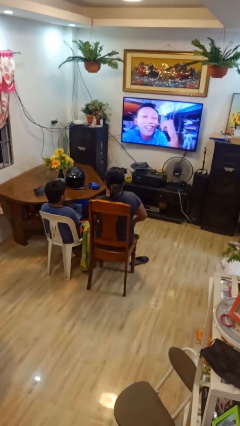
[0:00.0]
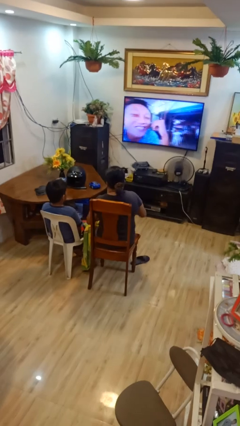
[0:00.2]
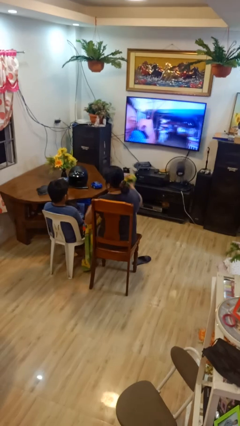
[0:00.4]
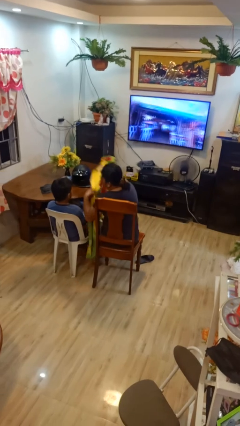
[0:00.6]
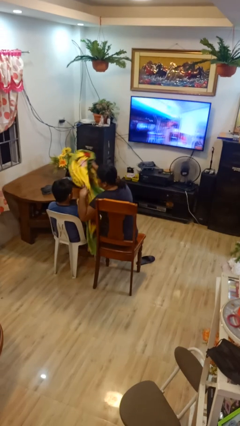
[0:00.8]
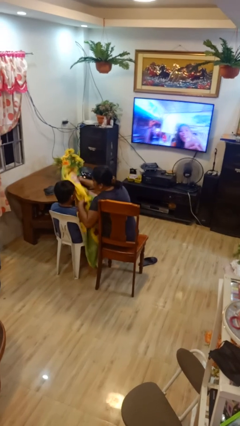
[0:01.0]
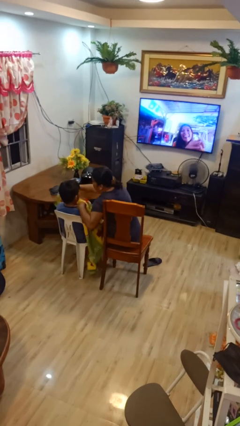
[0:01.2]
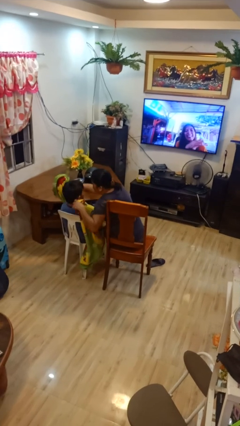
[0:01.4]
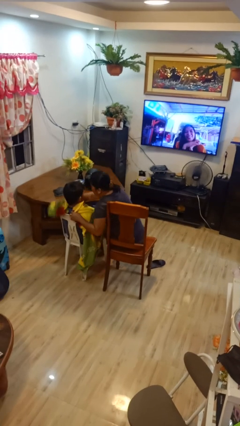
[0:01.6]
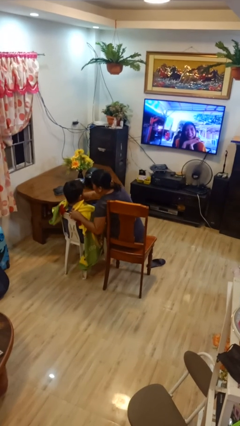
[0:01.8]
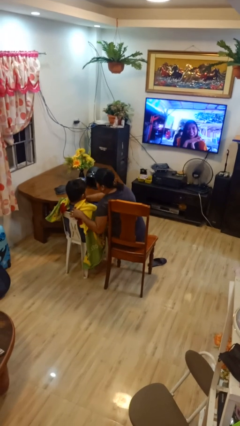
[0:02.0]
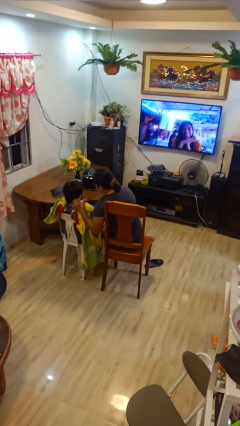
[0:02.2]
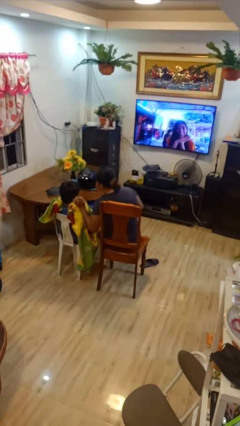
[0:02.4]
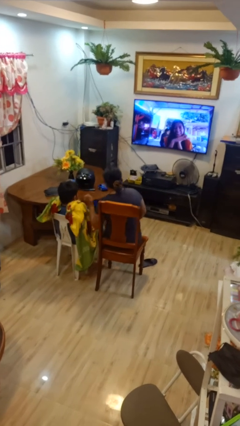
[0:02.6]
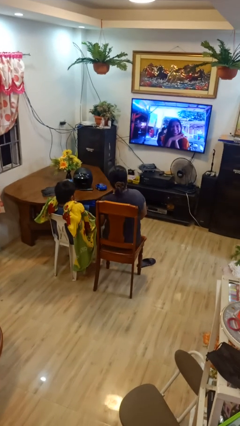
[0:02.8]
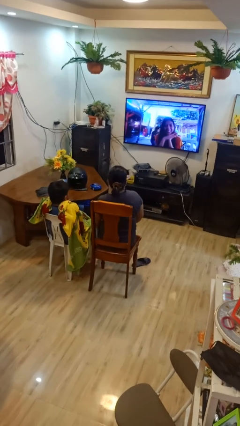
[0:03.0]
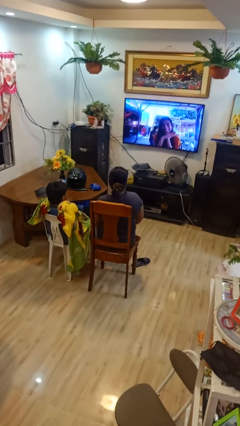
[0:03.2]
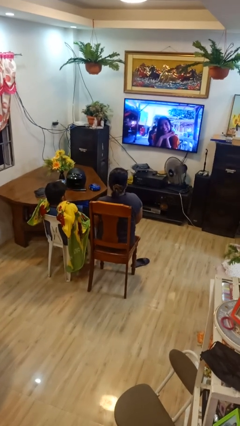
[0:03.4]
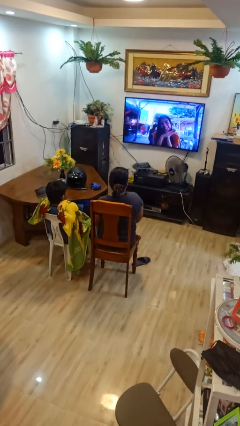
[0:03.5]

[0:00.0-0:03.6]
person covers friend with blanket

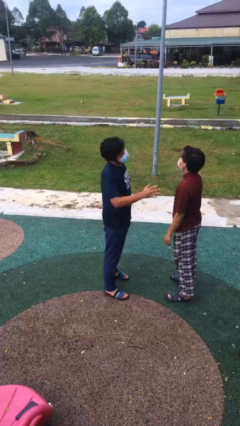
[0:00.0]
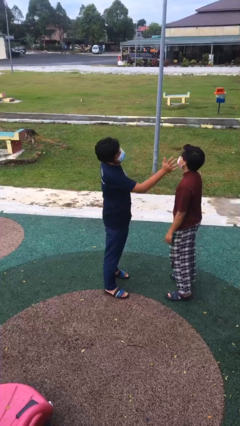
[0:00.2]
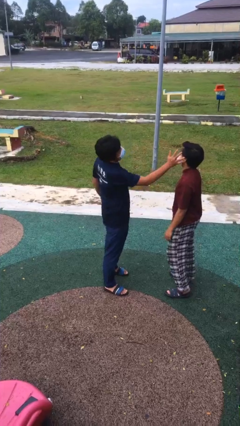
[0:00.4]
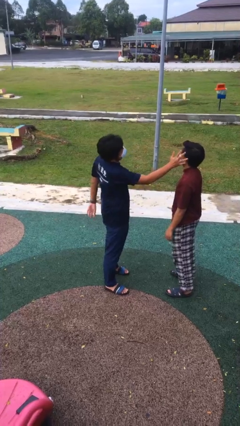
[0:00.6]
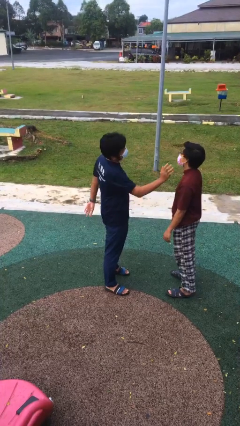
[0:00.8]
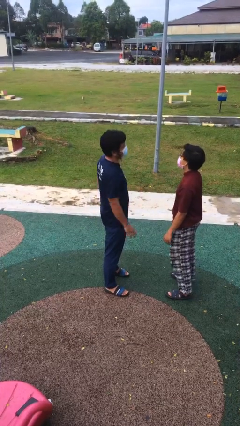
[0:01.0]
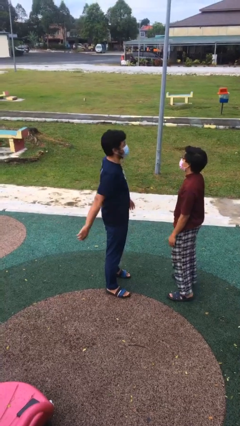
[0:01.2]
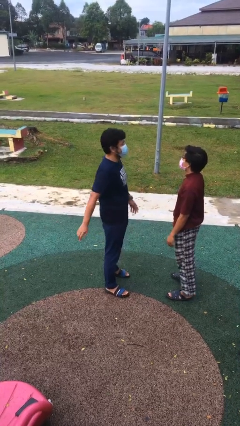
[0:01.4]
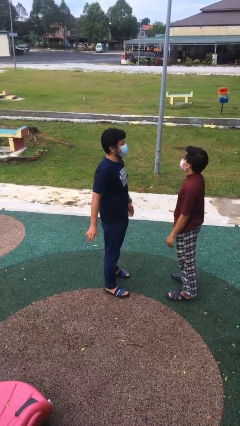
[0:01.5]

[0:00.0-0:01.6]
person touches face of person

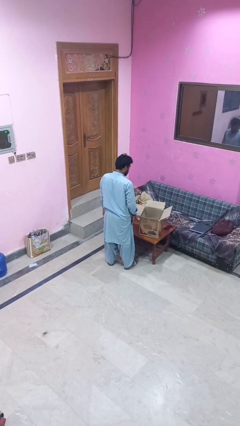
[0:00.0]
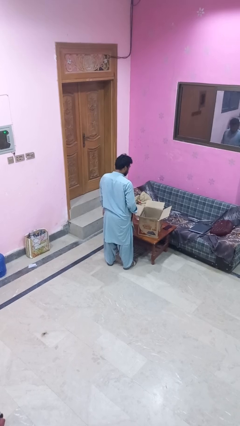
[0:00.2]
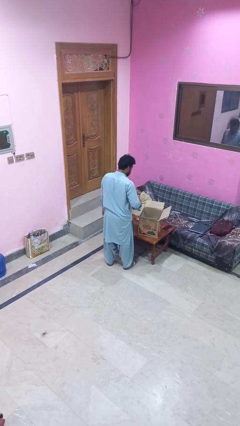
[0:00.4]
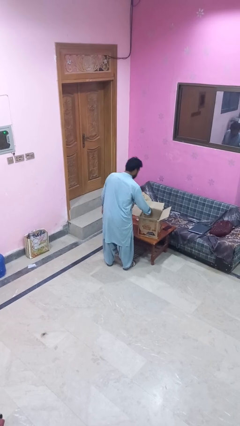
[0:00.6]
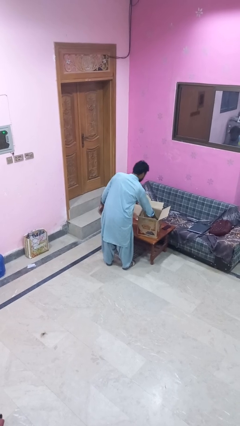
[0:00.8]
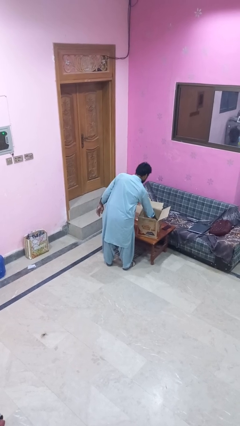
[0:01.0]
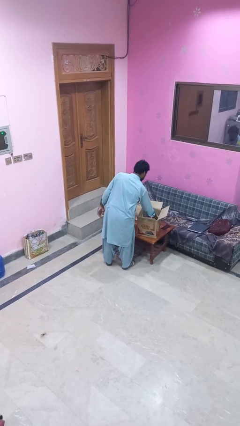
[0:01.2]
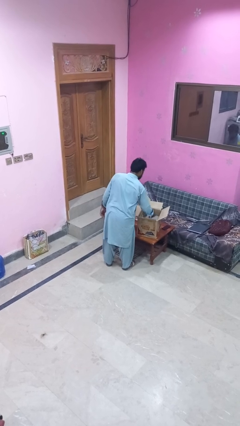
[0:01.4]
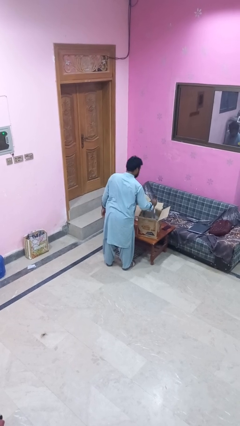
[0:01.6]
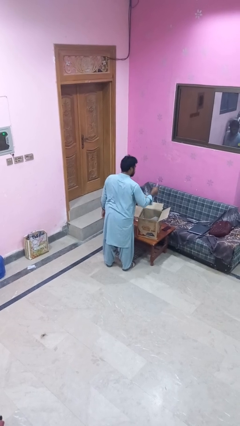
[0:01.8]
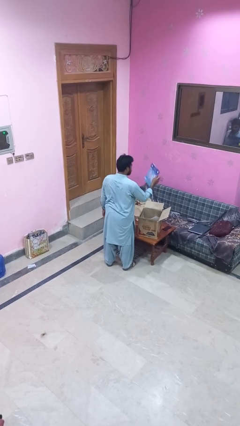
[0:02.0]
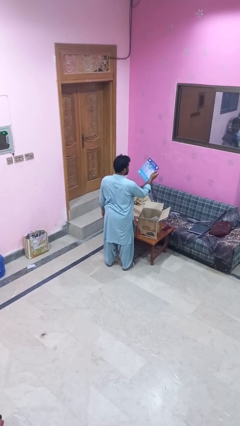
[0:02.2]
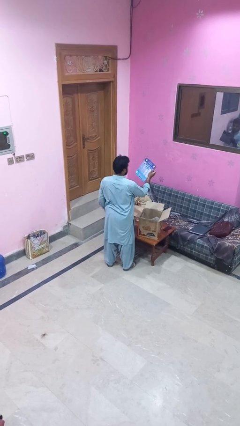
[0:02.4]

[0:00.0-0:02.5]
person takes object from box

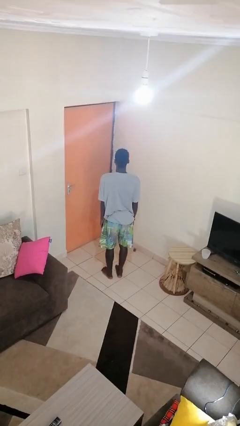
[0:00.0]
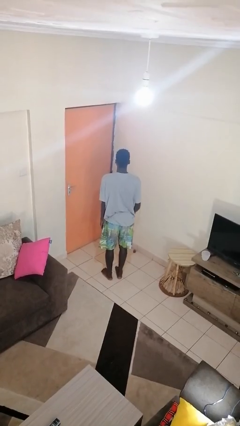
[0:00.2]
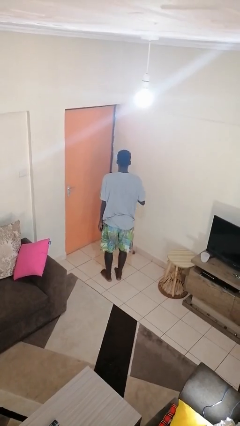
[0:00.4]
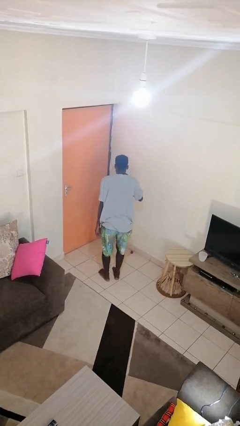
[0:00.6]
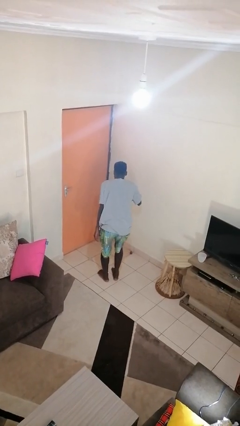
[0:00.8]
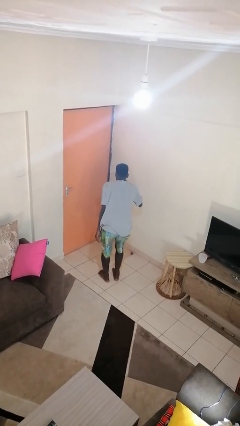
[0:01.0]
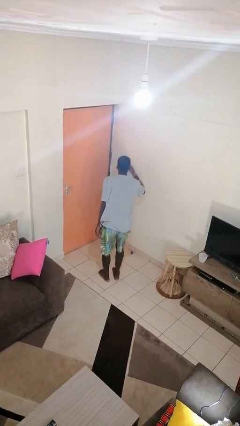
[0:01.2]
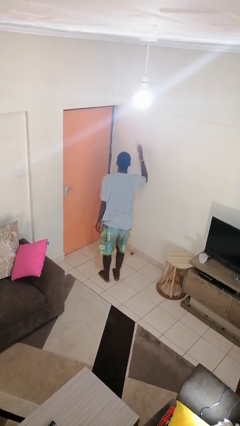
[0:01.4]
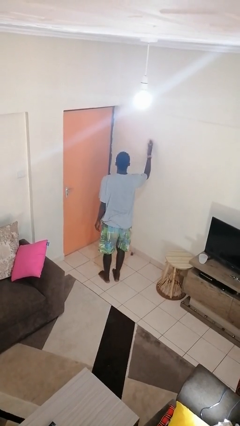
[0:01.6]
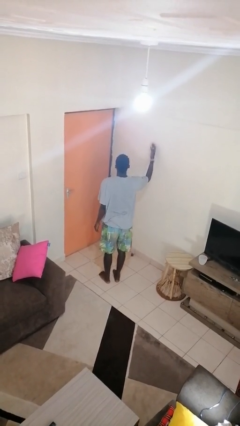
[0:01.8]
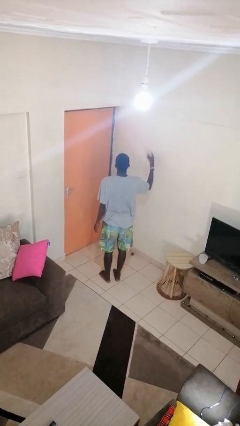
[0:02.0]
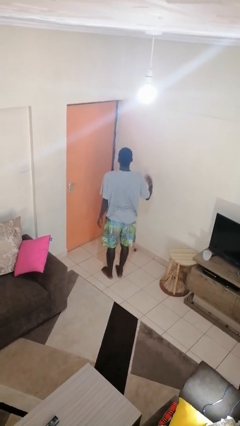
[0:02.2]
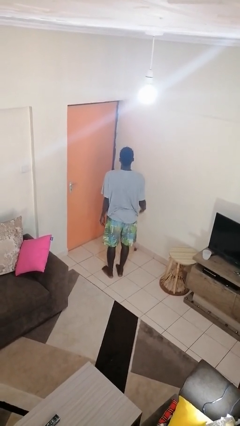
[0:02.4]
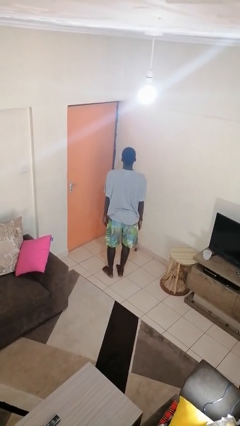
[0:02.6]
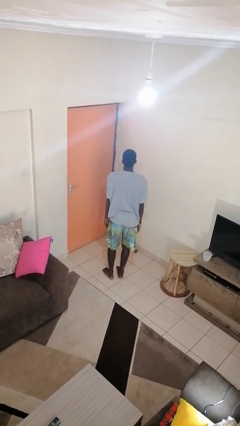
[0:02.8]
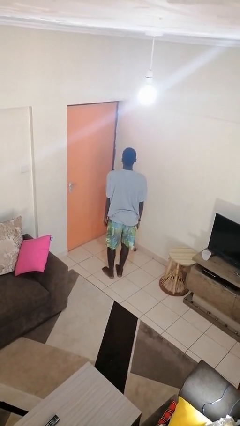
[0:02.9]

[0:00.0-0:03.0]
person gestures blow kiss

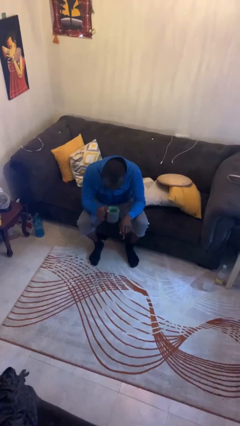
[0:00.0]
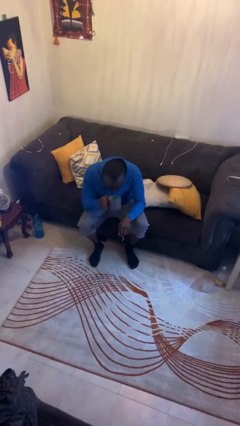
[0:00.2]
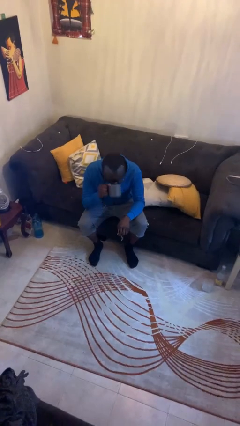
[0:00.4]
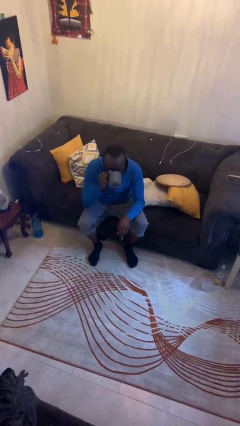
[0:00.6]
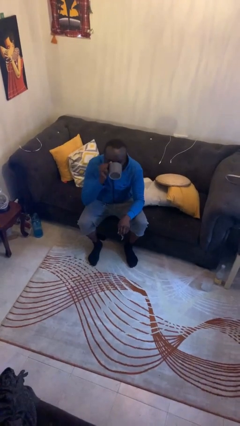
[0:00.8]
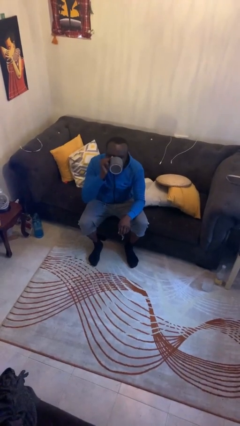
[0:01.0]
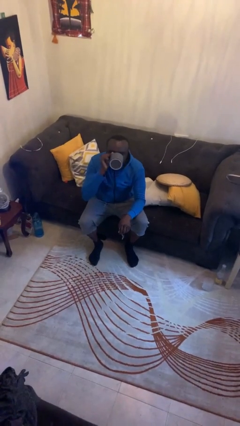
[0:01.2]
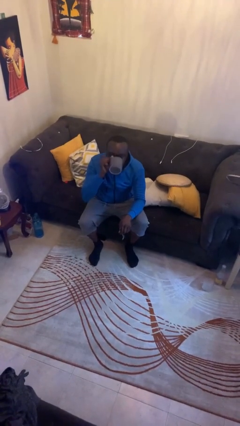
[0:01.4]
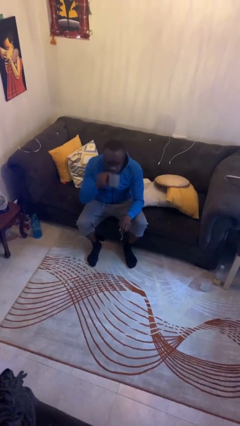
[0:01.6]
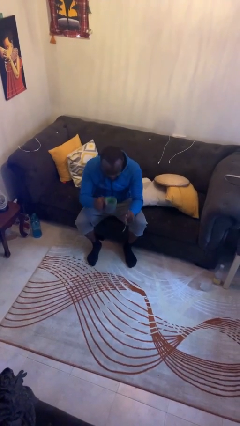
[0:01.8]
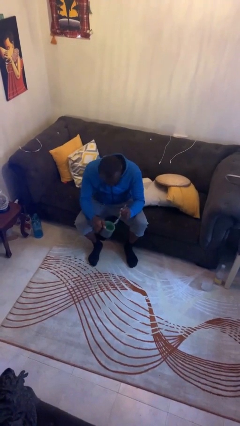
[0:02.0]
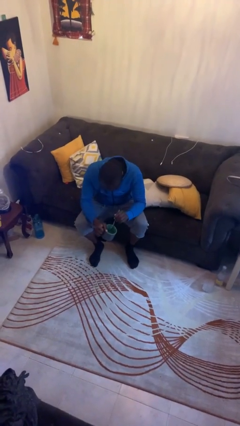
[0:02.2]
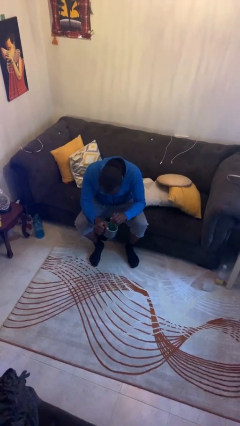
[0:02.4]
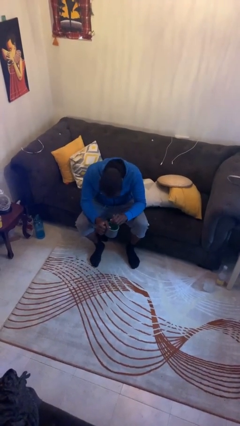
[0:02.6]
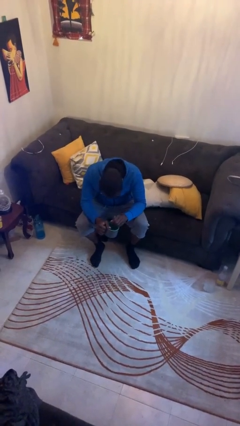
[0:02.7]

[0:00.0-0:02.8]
person drinks from mug

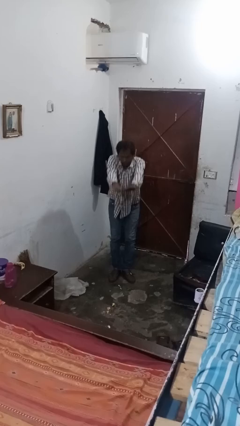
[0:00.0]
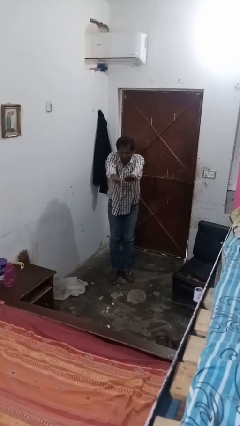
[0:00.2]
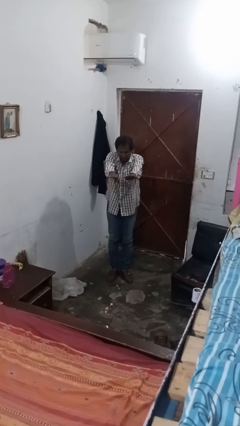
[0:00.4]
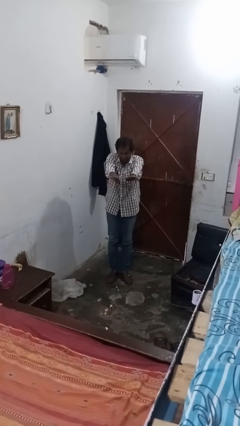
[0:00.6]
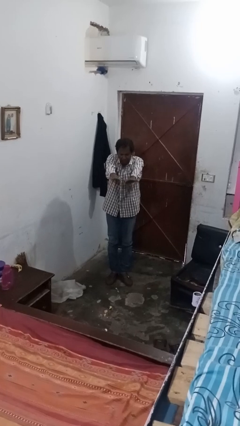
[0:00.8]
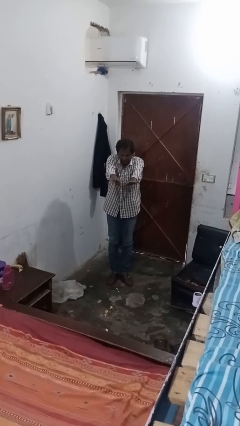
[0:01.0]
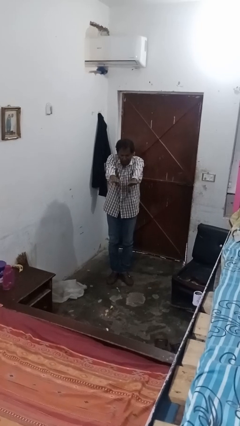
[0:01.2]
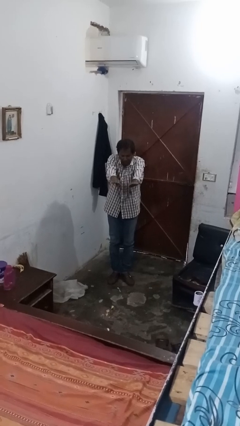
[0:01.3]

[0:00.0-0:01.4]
person stands up

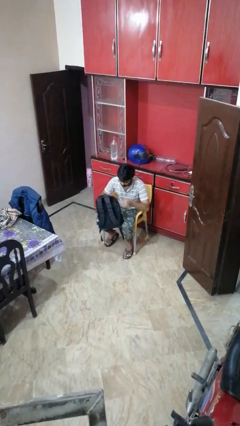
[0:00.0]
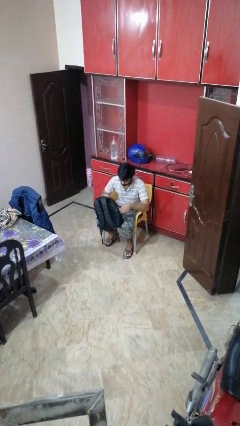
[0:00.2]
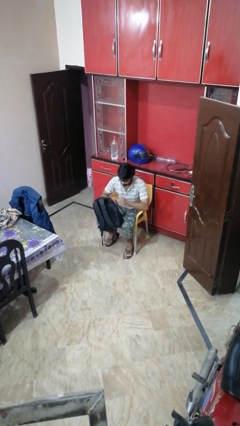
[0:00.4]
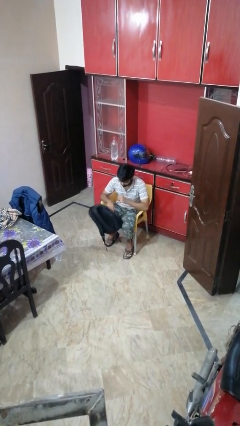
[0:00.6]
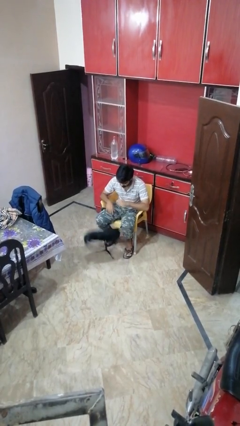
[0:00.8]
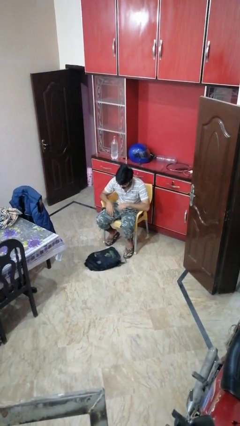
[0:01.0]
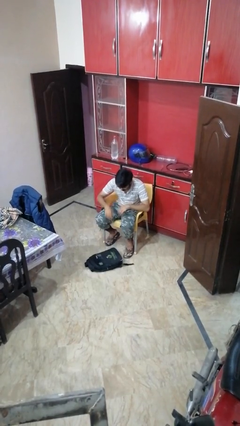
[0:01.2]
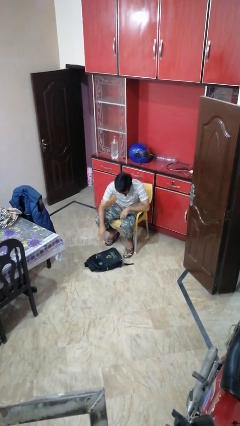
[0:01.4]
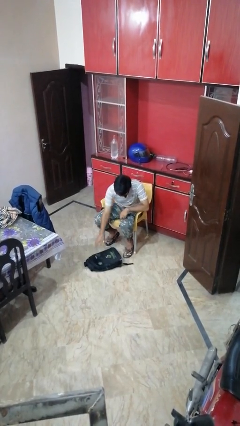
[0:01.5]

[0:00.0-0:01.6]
person drops object

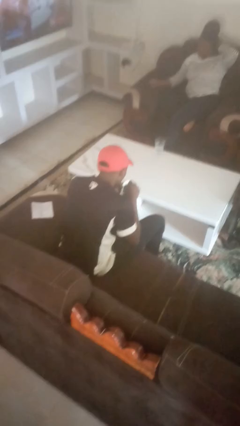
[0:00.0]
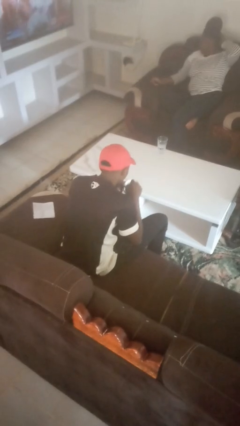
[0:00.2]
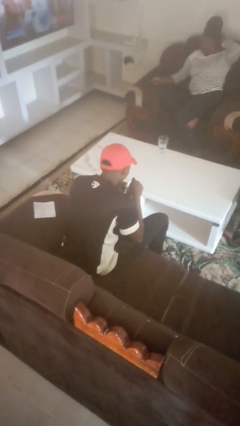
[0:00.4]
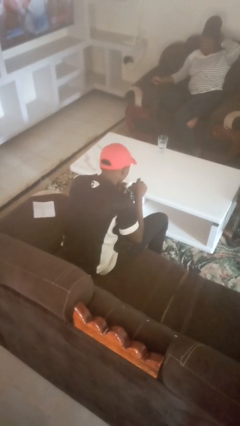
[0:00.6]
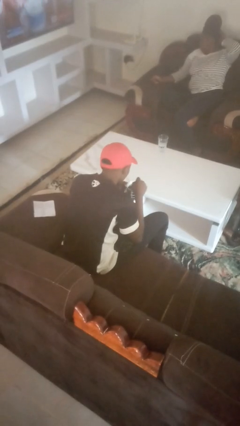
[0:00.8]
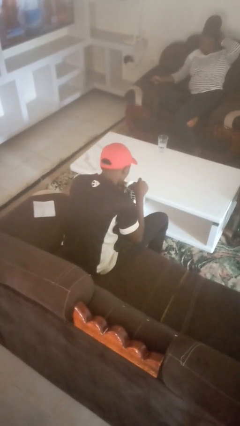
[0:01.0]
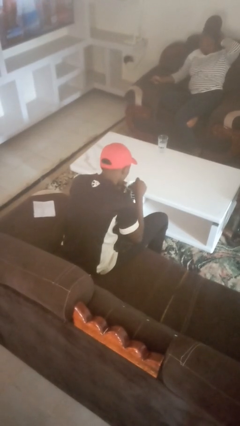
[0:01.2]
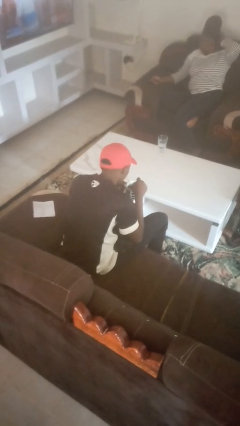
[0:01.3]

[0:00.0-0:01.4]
person stirs mug
